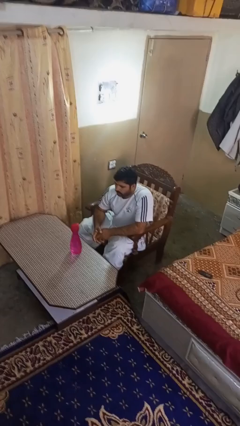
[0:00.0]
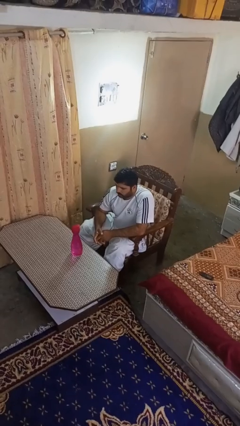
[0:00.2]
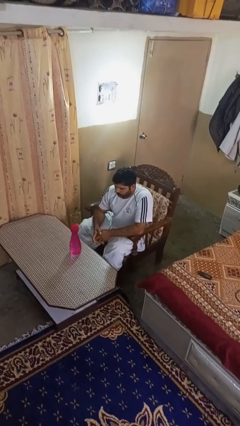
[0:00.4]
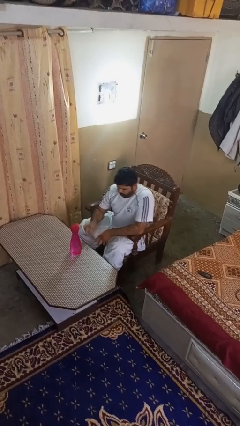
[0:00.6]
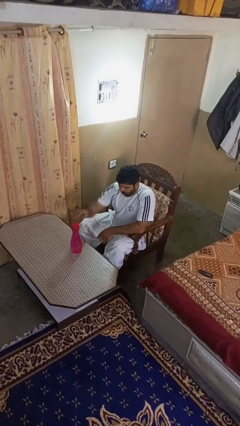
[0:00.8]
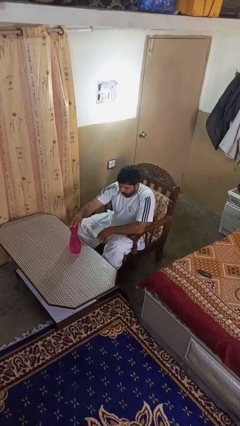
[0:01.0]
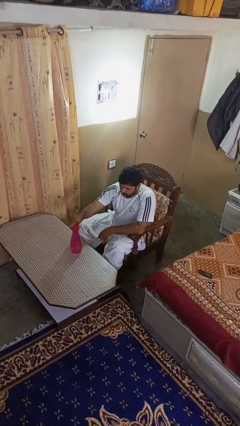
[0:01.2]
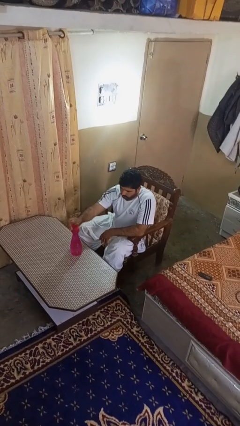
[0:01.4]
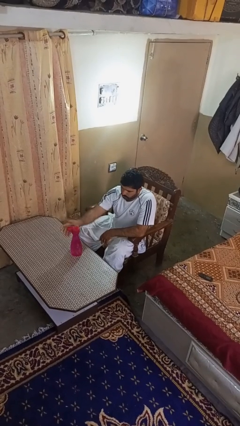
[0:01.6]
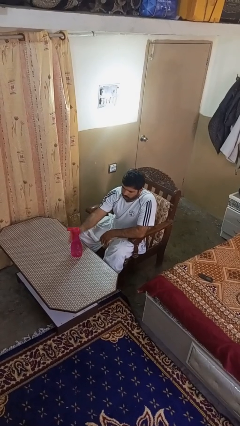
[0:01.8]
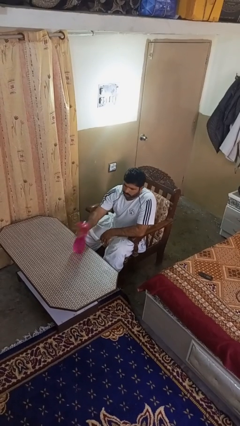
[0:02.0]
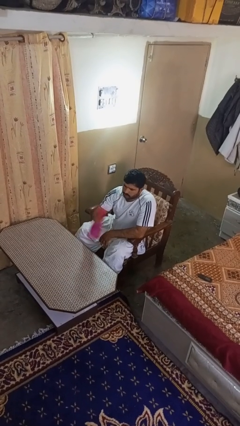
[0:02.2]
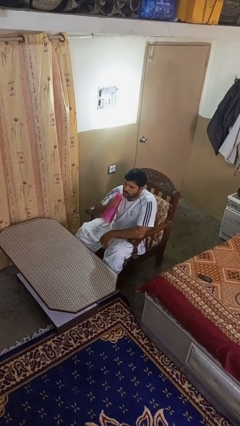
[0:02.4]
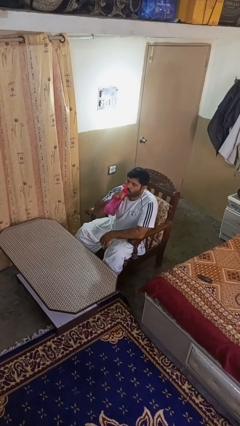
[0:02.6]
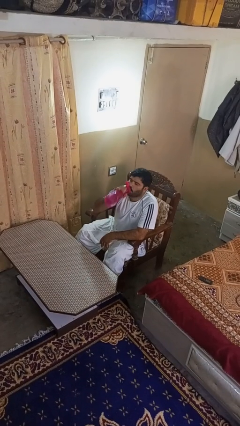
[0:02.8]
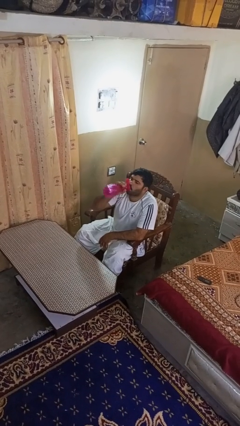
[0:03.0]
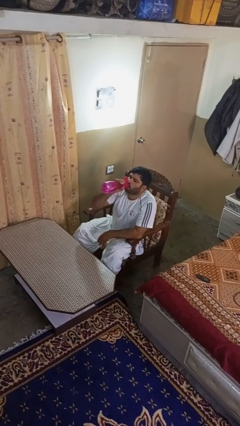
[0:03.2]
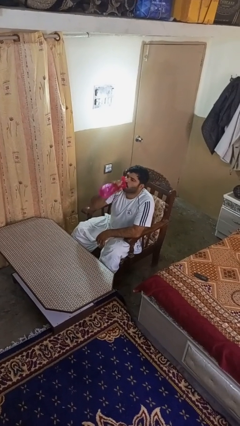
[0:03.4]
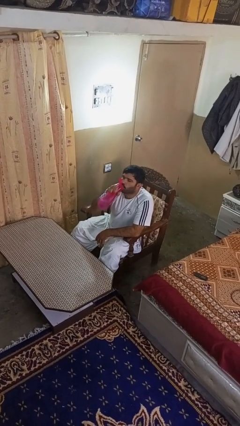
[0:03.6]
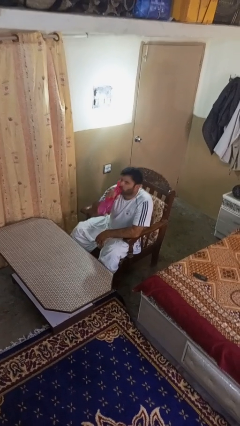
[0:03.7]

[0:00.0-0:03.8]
person drinks from bottle

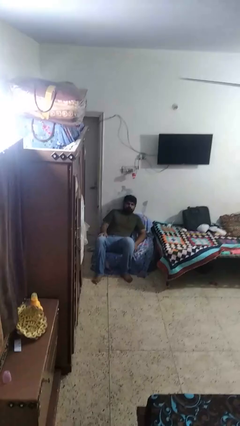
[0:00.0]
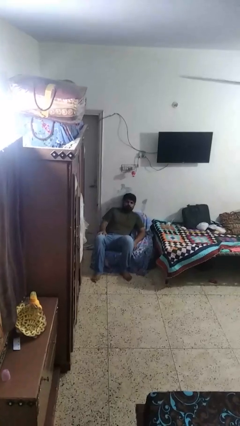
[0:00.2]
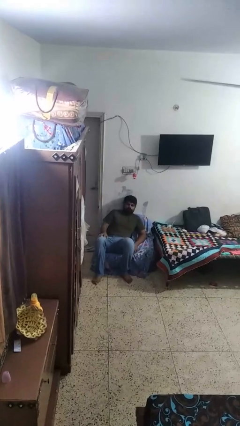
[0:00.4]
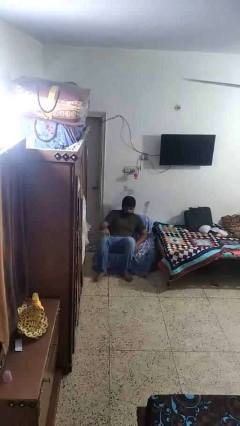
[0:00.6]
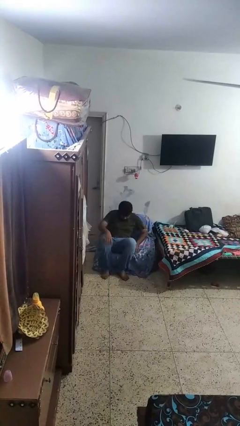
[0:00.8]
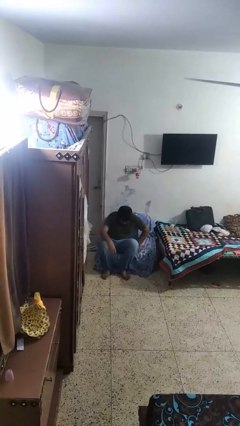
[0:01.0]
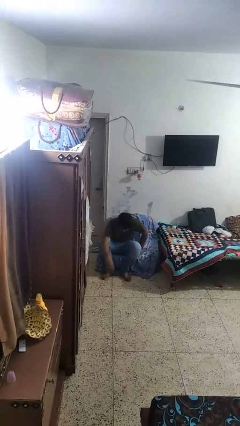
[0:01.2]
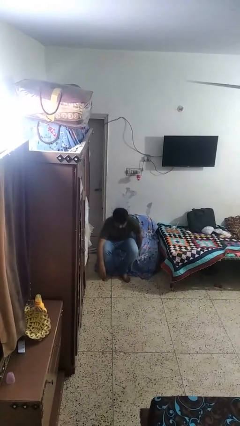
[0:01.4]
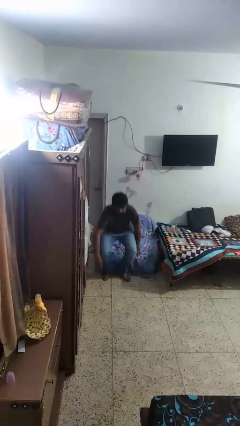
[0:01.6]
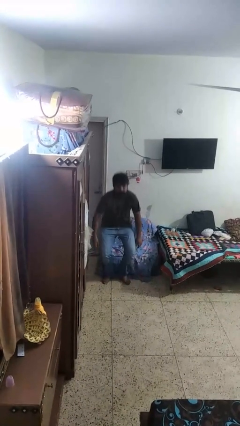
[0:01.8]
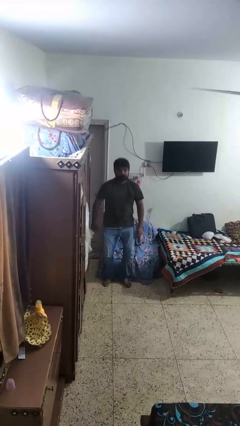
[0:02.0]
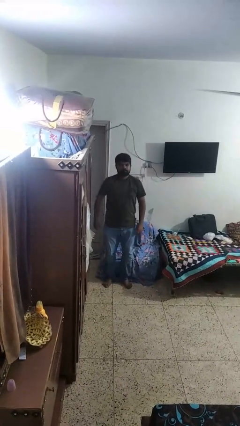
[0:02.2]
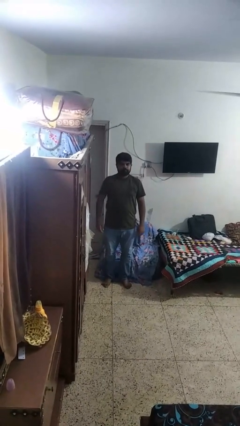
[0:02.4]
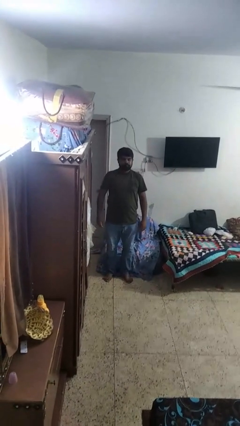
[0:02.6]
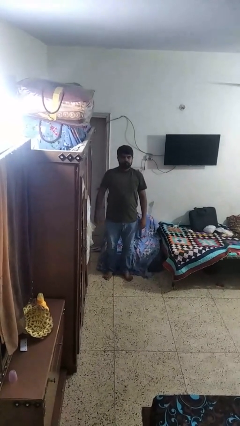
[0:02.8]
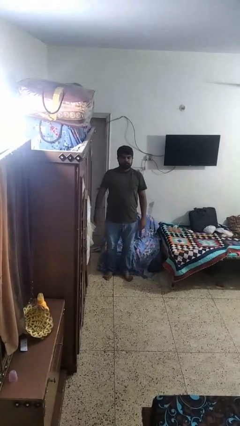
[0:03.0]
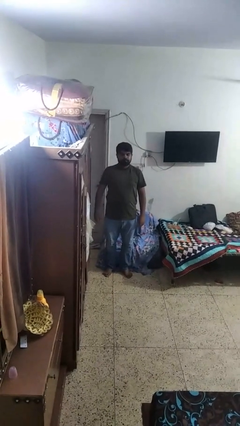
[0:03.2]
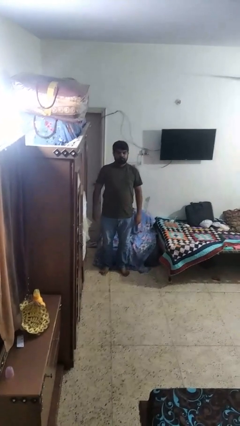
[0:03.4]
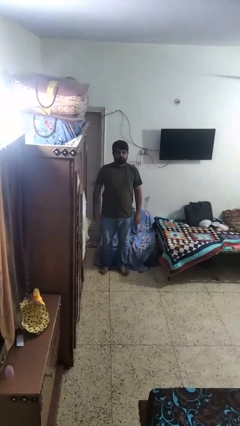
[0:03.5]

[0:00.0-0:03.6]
person stands up

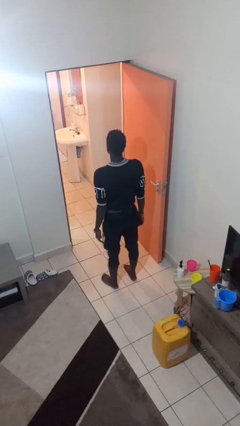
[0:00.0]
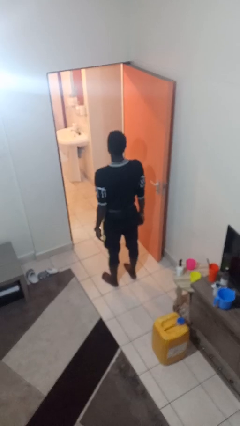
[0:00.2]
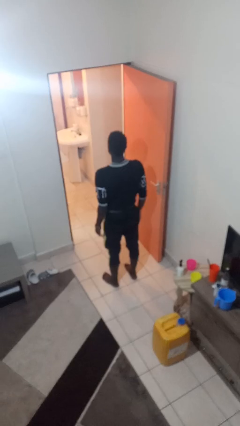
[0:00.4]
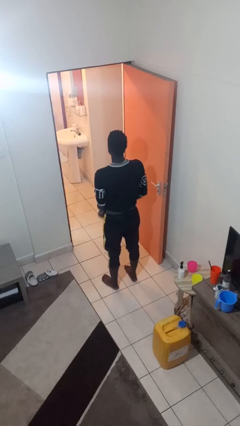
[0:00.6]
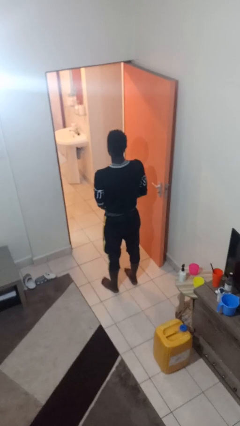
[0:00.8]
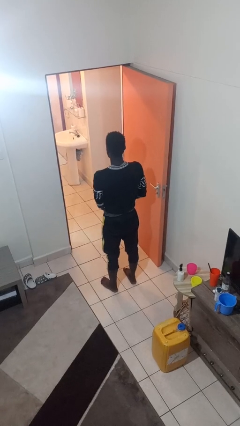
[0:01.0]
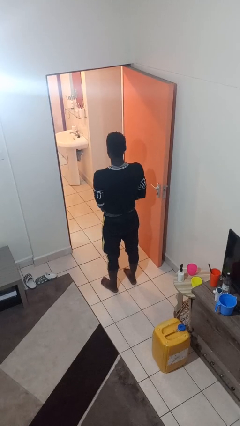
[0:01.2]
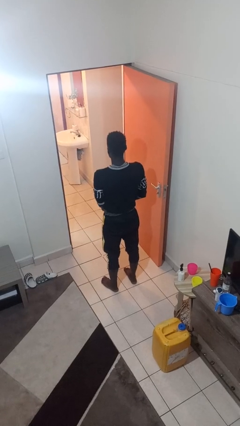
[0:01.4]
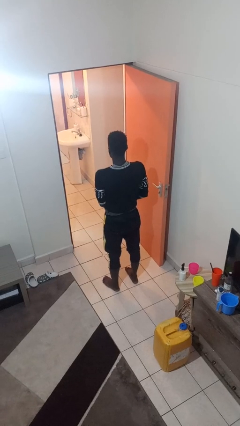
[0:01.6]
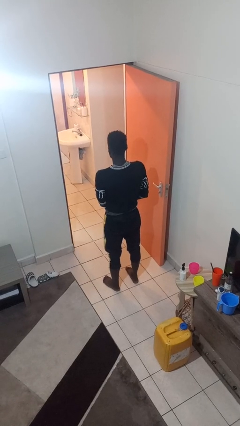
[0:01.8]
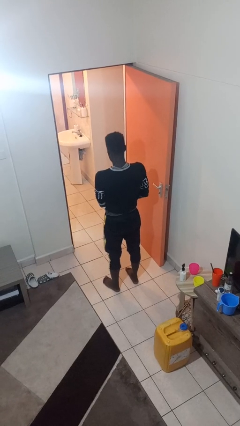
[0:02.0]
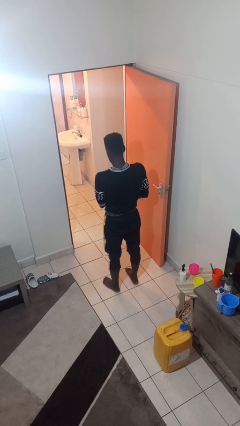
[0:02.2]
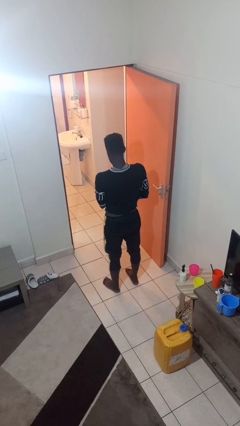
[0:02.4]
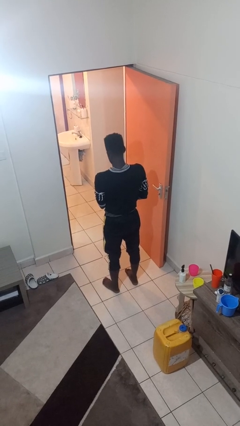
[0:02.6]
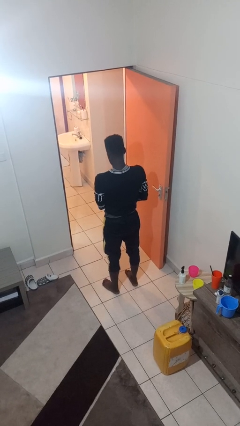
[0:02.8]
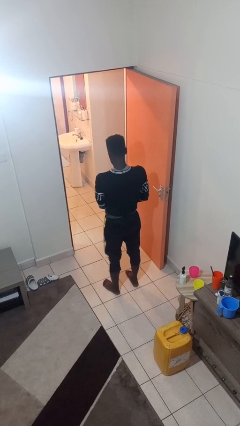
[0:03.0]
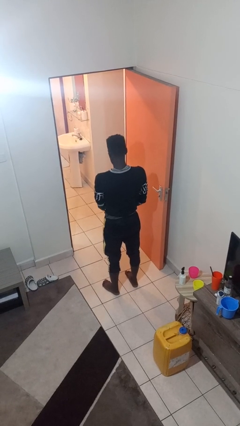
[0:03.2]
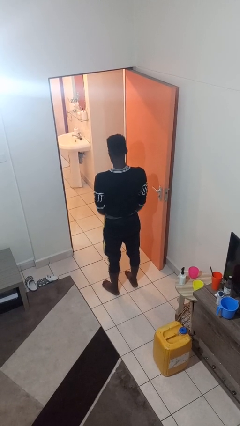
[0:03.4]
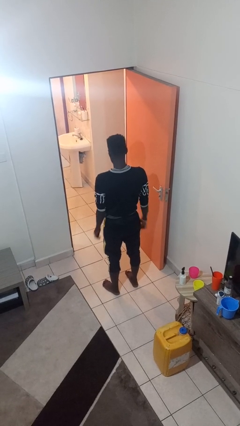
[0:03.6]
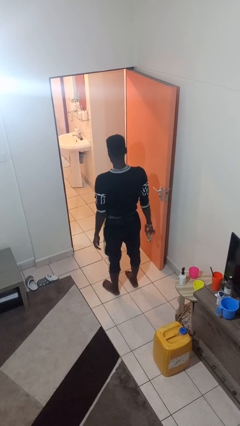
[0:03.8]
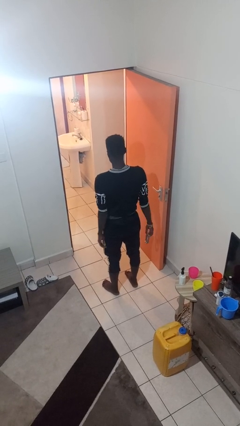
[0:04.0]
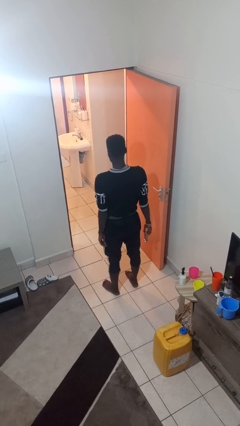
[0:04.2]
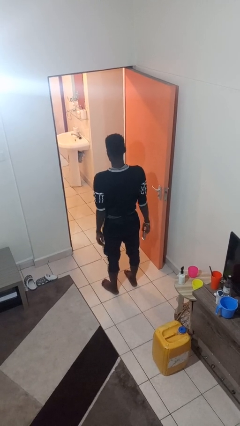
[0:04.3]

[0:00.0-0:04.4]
person takes off wristwatch

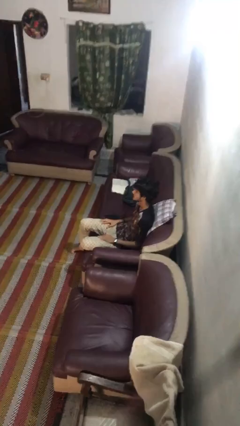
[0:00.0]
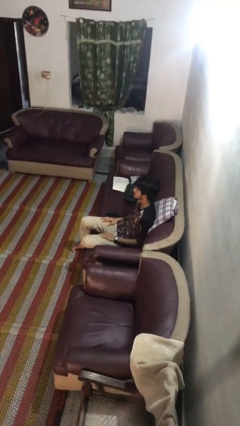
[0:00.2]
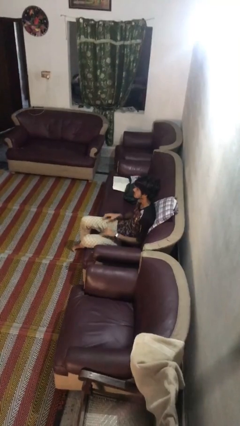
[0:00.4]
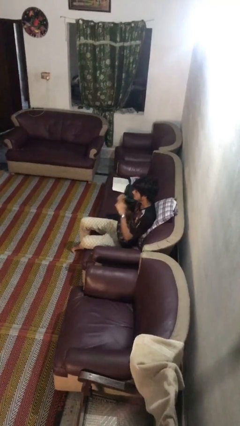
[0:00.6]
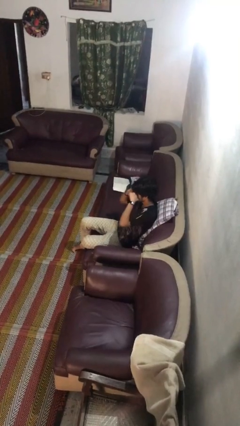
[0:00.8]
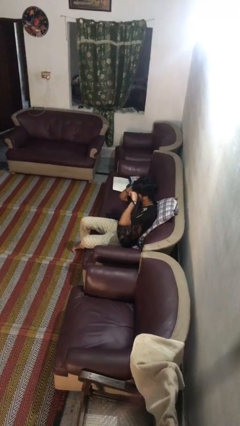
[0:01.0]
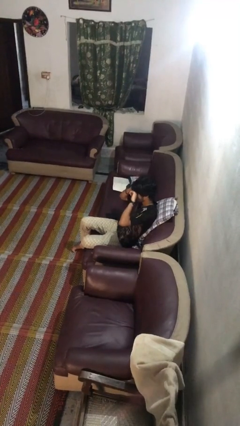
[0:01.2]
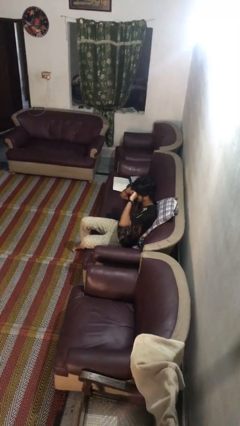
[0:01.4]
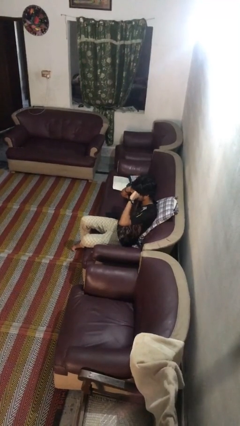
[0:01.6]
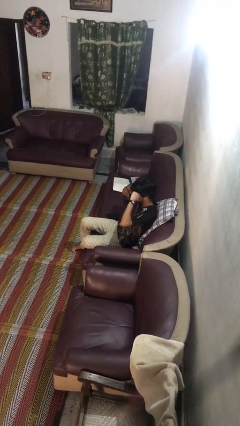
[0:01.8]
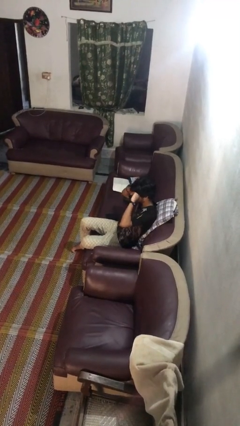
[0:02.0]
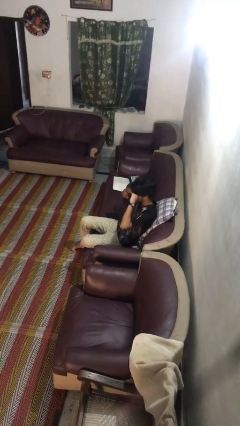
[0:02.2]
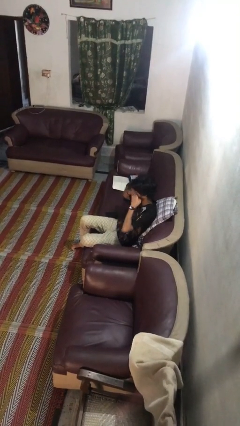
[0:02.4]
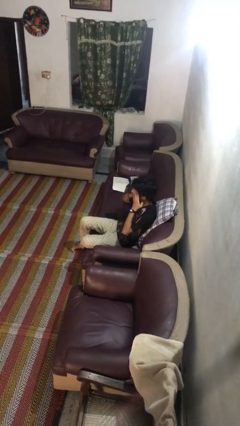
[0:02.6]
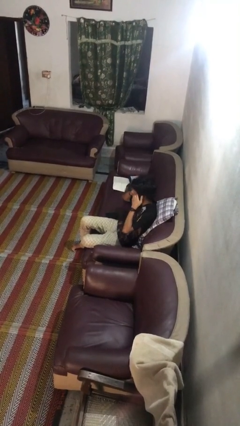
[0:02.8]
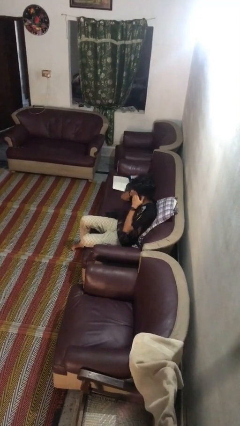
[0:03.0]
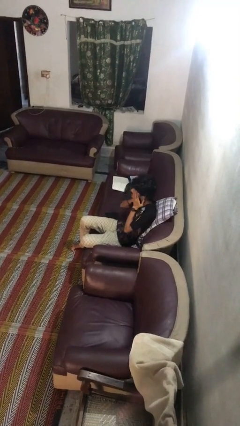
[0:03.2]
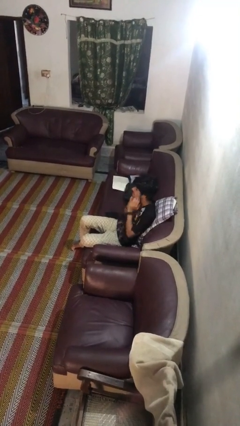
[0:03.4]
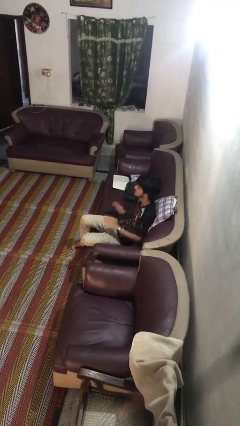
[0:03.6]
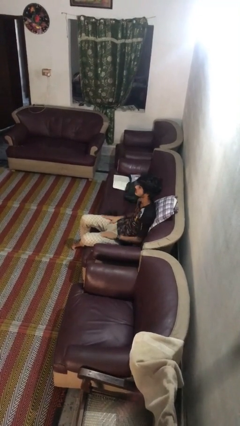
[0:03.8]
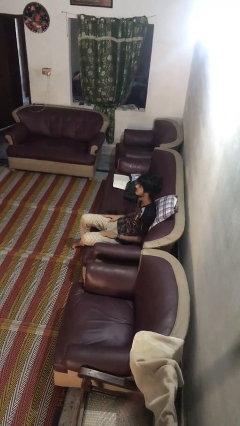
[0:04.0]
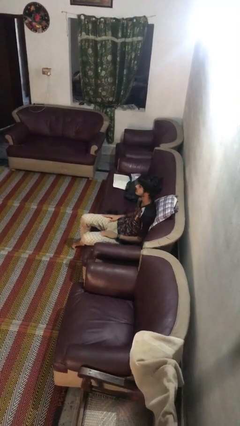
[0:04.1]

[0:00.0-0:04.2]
person rubs eyes

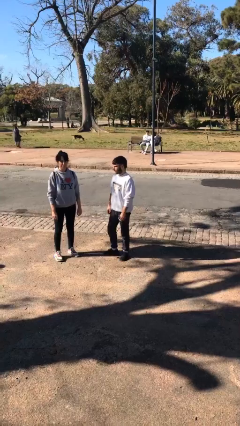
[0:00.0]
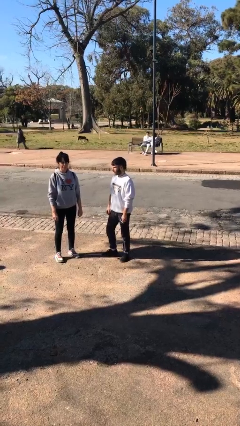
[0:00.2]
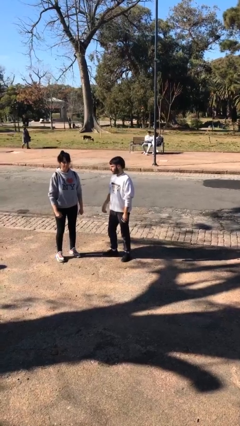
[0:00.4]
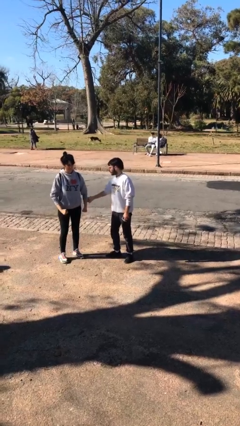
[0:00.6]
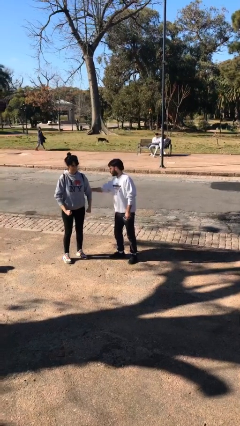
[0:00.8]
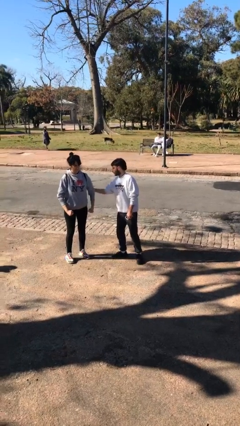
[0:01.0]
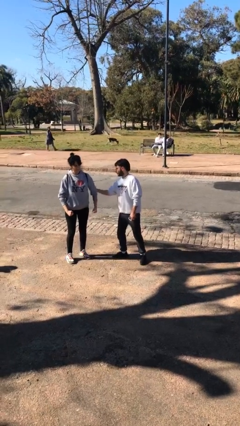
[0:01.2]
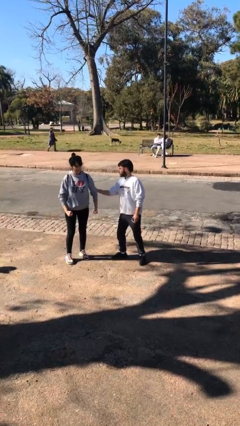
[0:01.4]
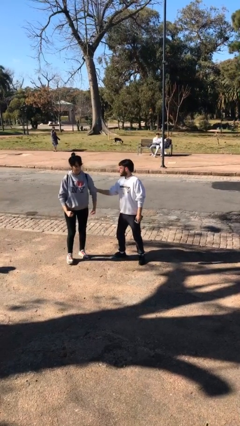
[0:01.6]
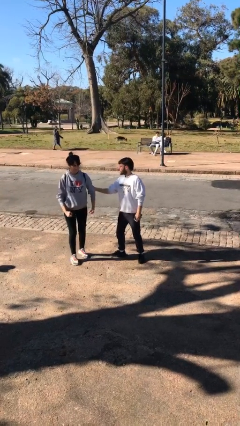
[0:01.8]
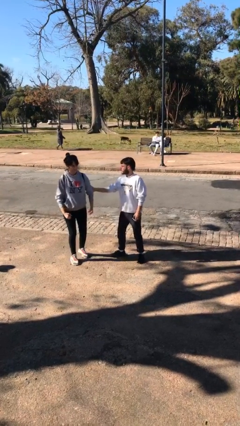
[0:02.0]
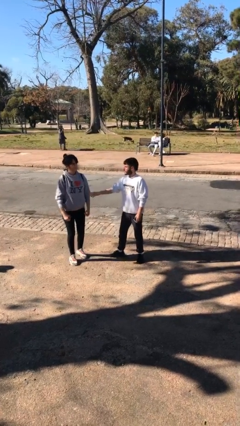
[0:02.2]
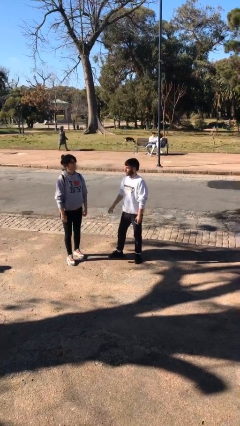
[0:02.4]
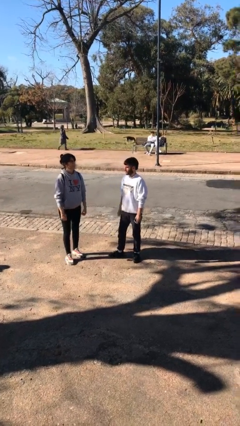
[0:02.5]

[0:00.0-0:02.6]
person grabs person by bicep
